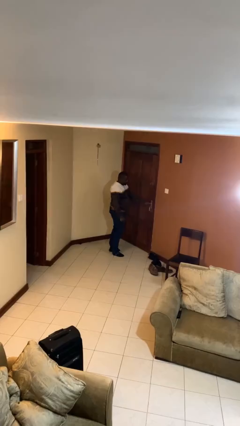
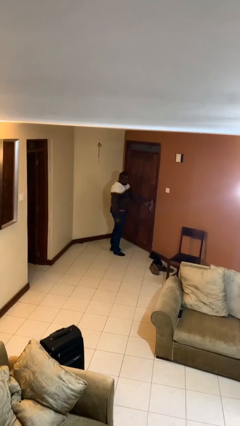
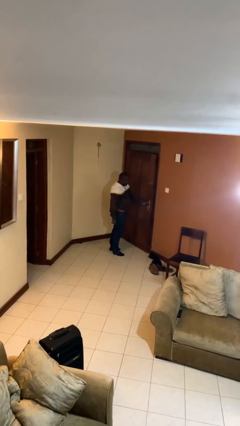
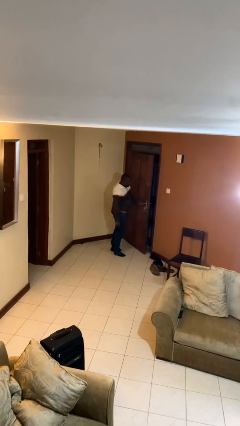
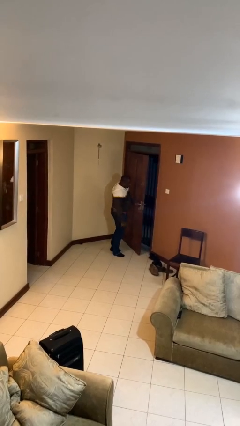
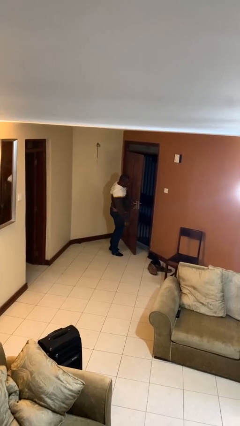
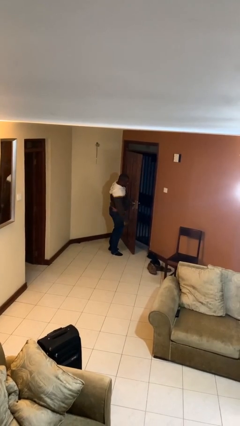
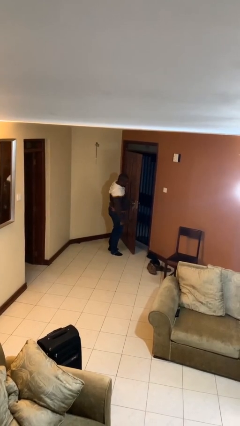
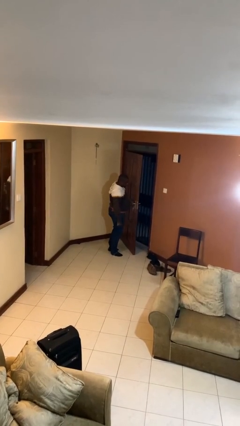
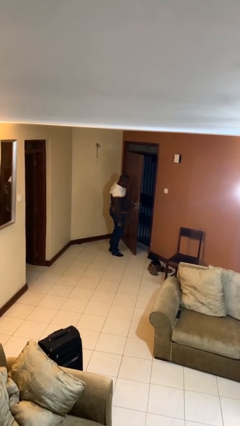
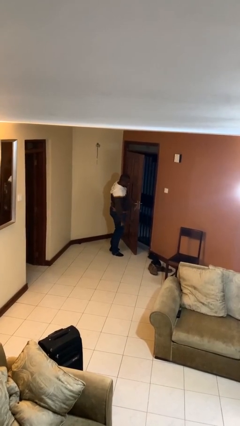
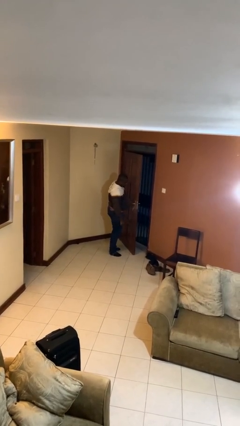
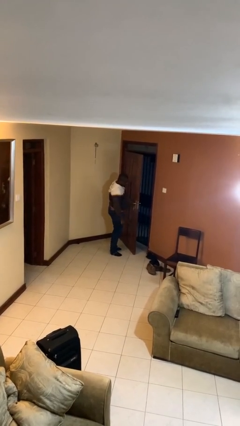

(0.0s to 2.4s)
person opens facility door

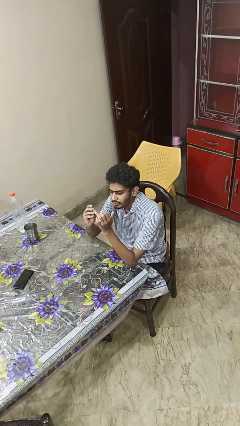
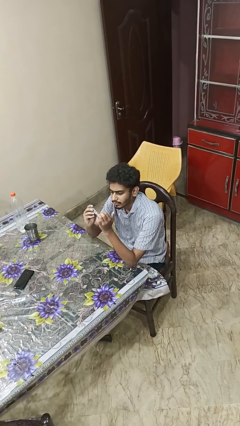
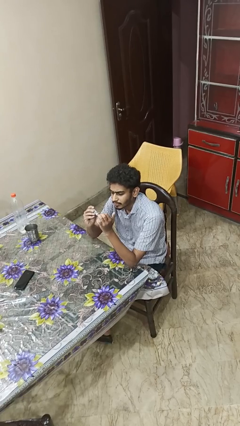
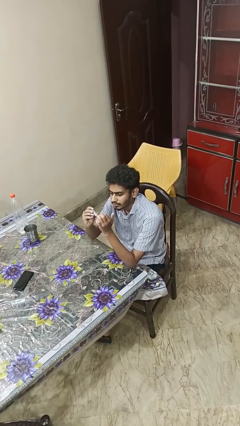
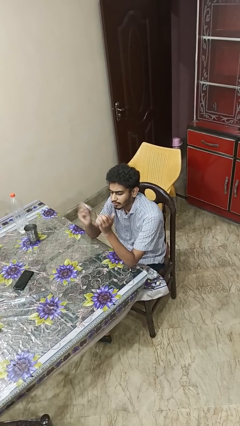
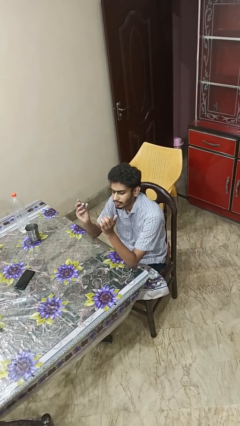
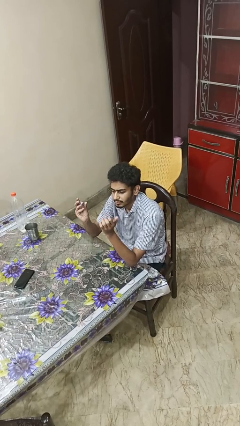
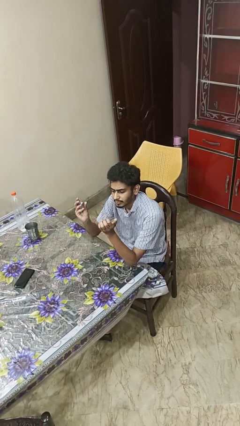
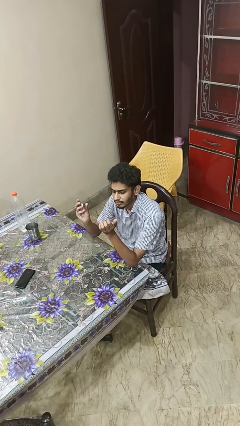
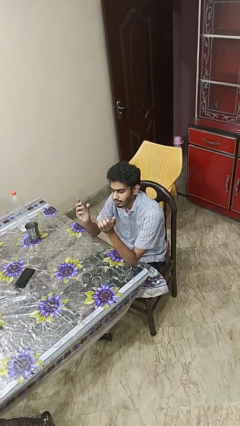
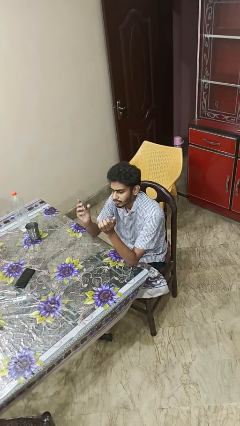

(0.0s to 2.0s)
person clips fingernails

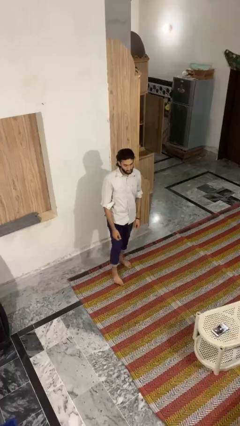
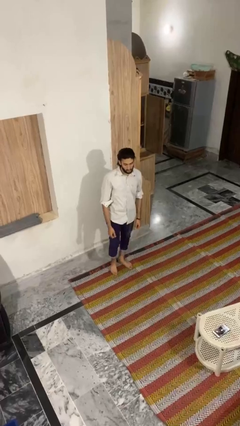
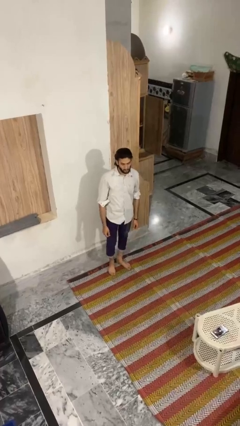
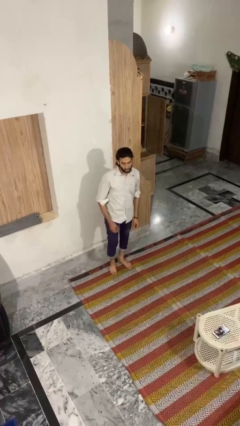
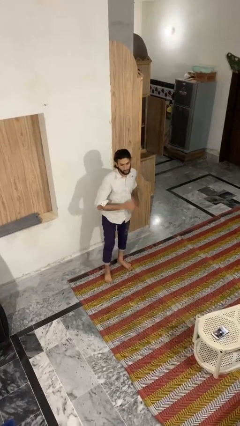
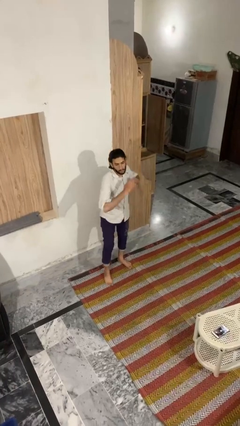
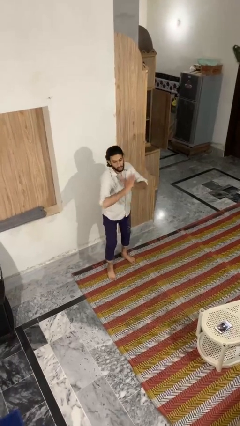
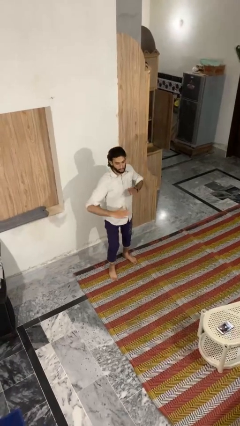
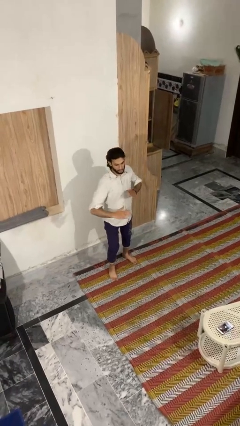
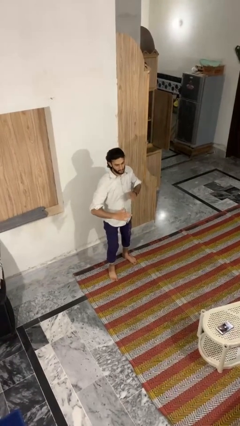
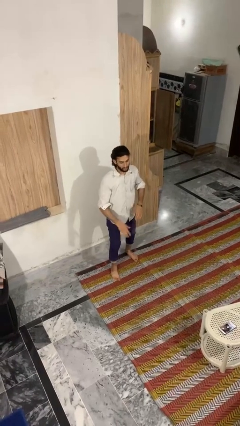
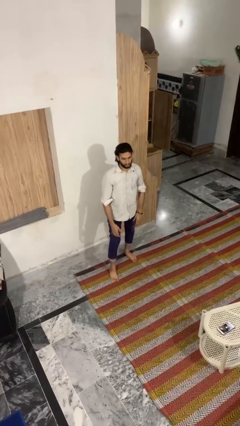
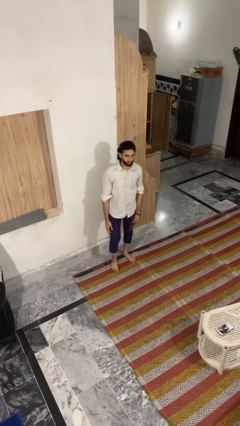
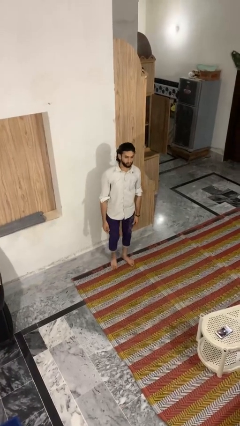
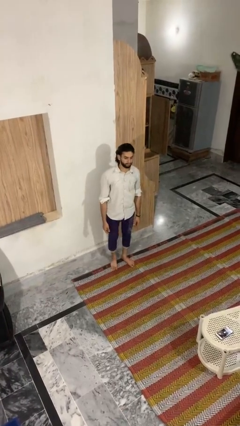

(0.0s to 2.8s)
person karate chop

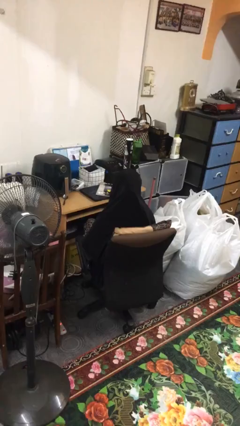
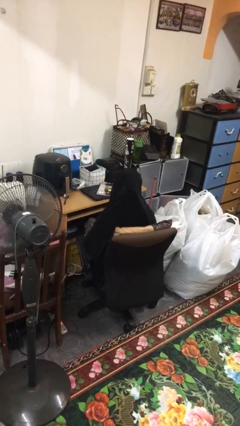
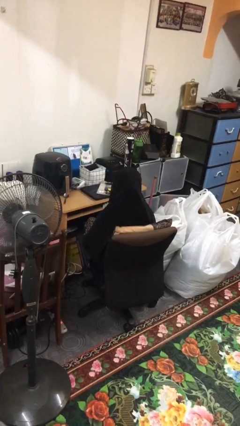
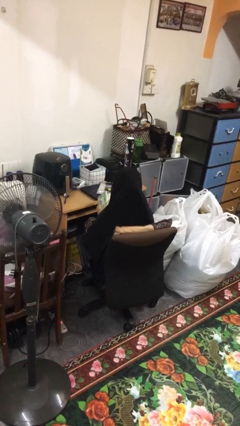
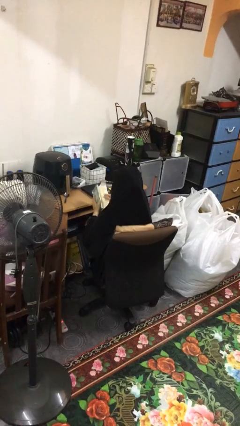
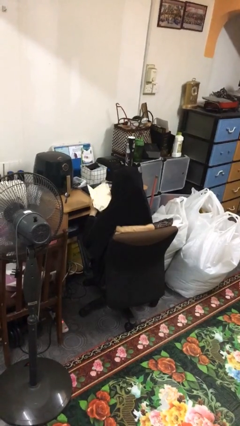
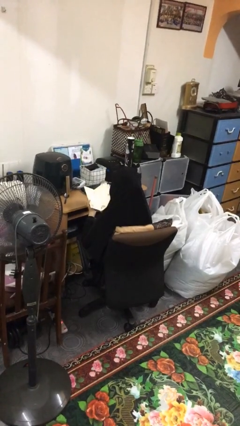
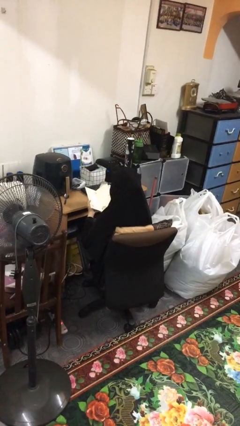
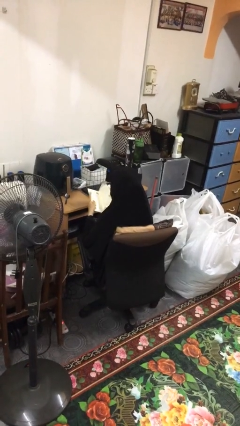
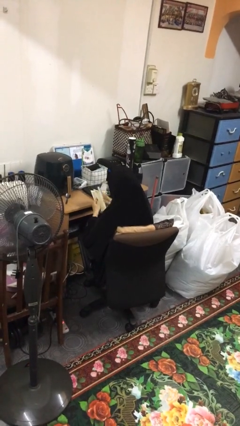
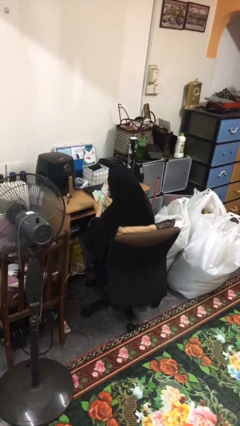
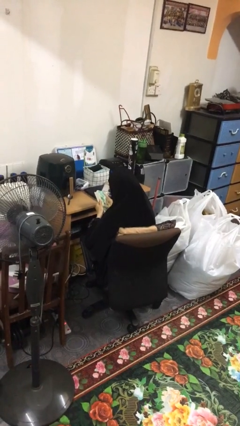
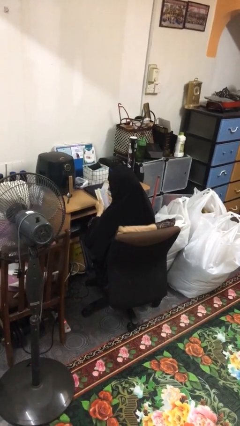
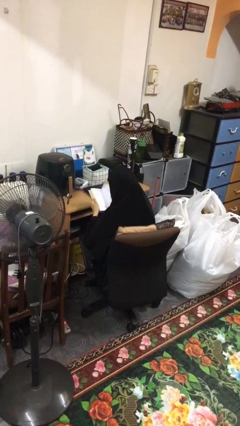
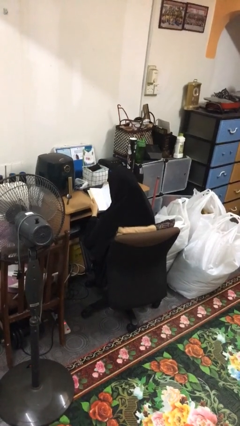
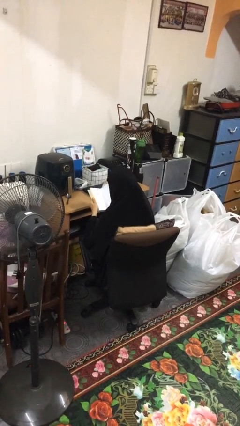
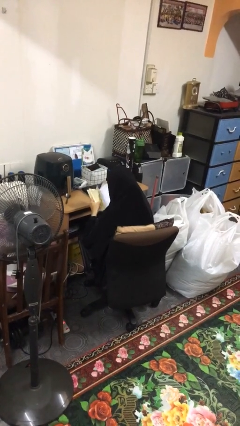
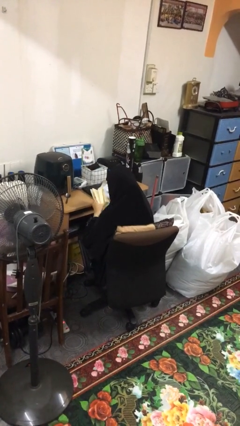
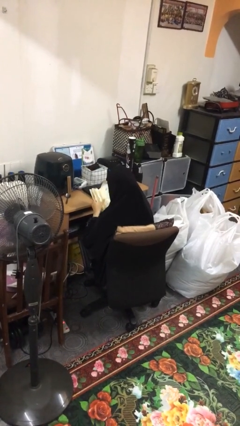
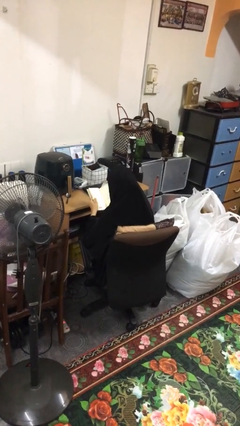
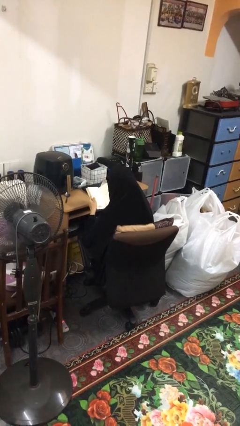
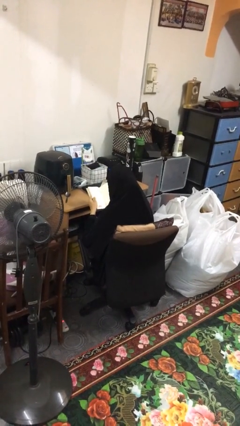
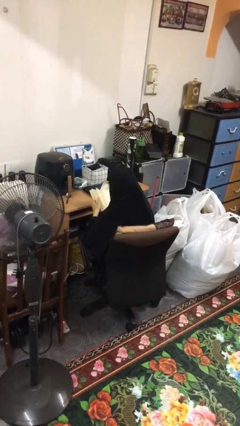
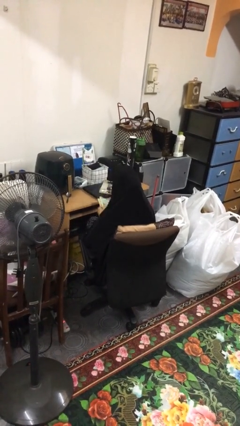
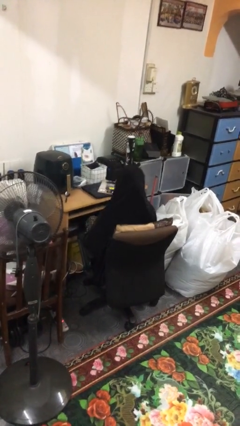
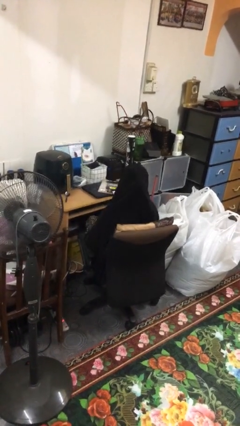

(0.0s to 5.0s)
person reads book

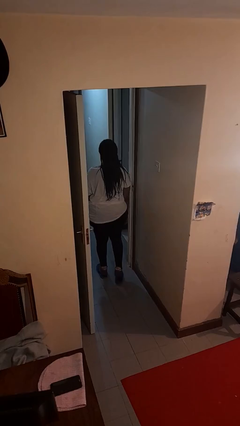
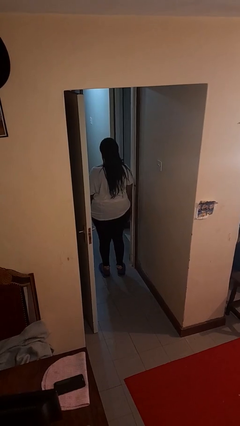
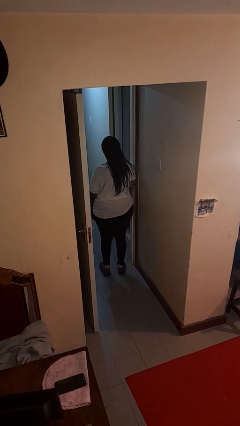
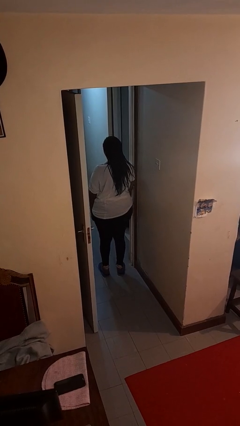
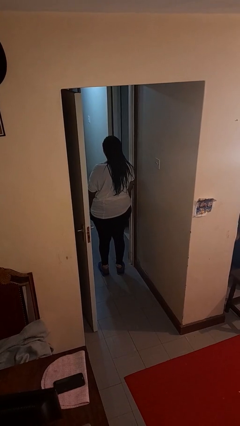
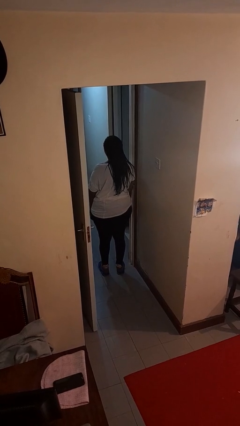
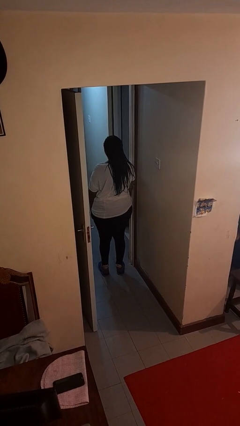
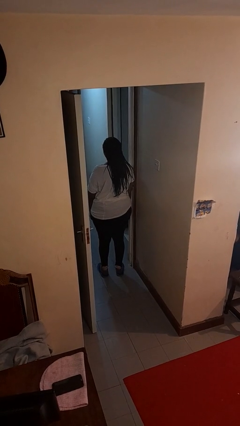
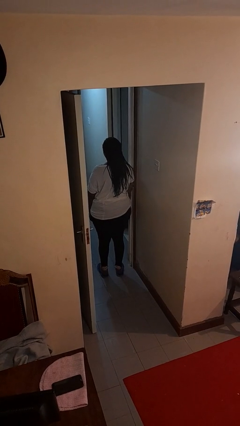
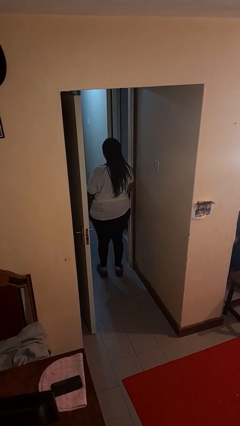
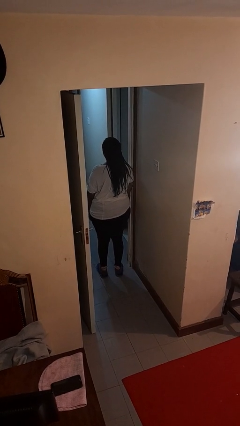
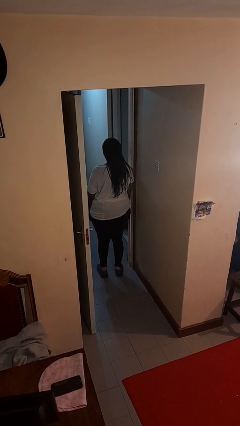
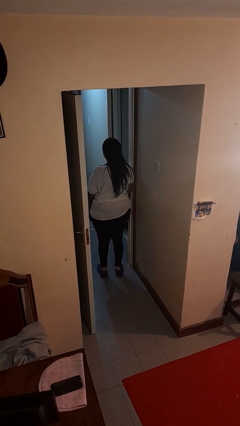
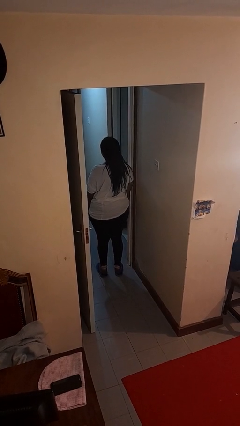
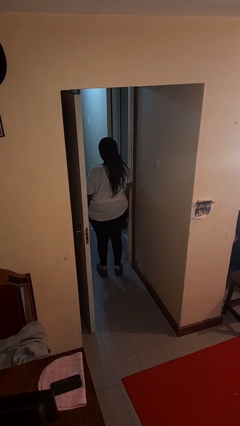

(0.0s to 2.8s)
person bumps into wall

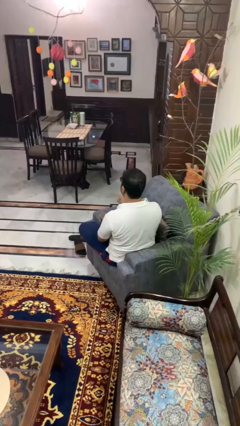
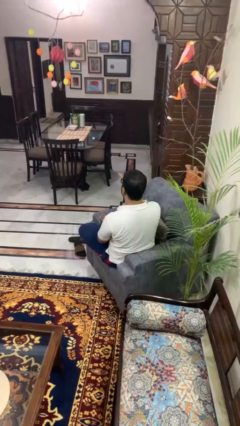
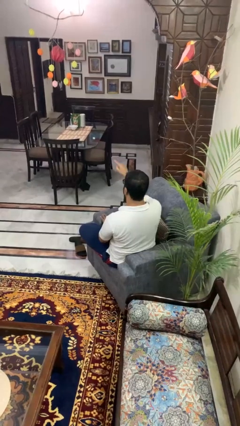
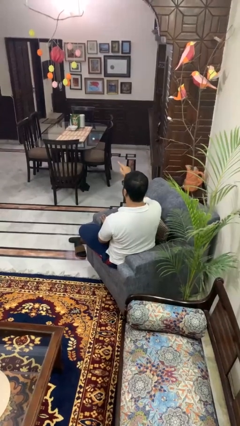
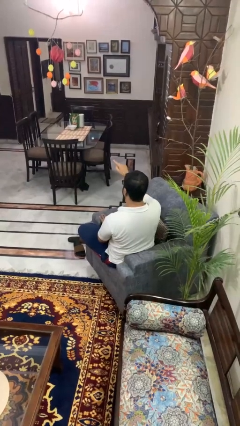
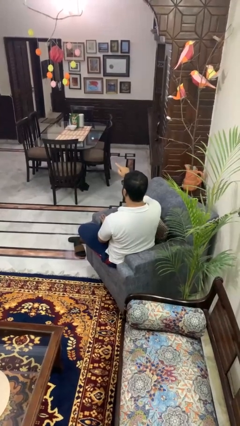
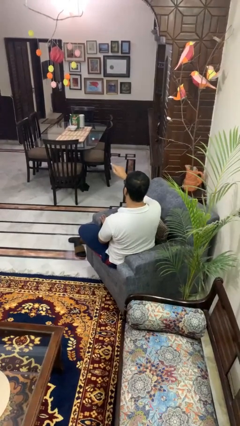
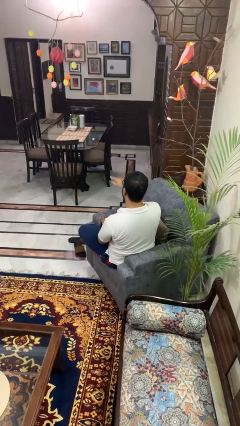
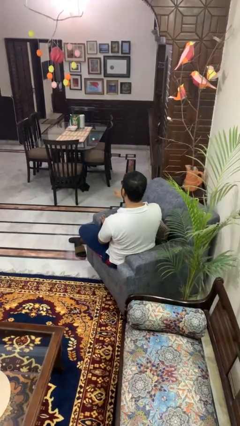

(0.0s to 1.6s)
person points at person

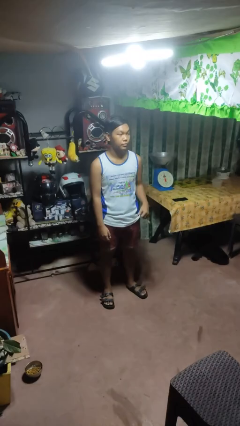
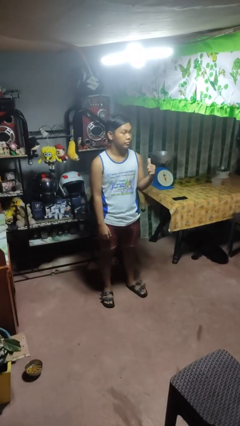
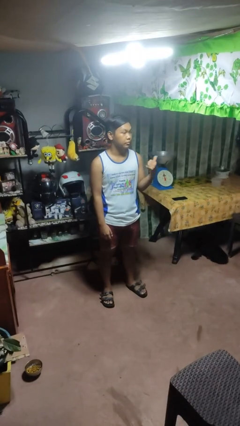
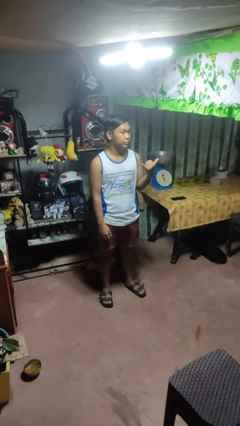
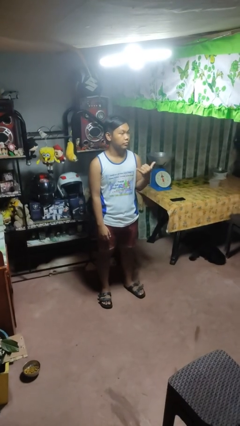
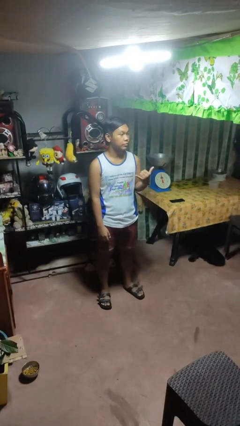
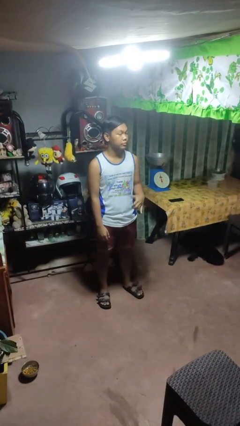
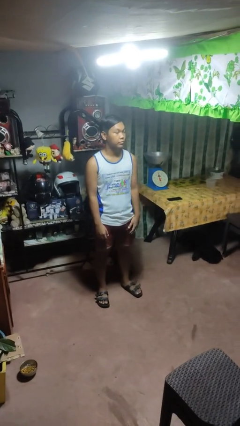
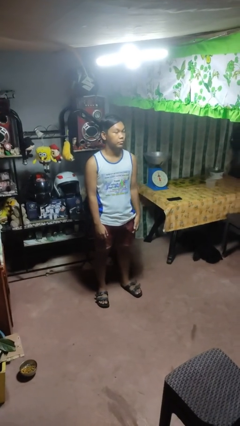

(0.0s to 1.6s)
person gestures hang loose
